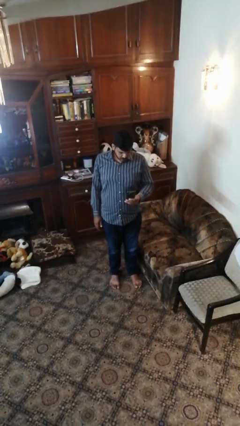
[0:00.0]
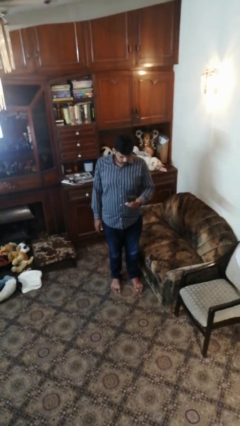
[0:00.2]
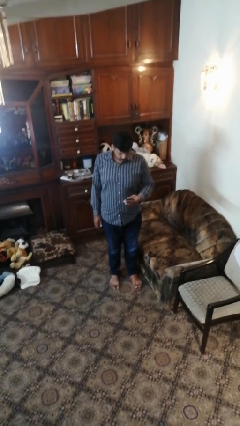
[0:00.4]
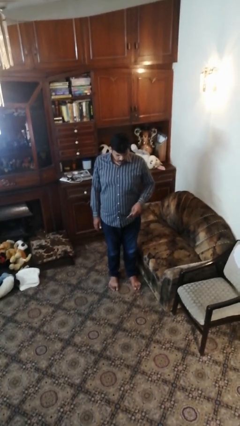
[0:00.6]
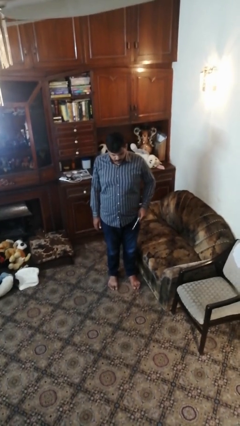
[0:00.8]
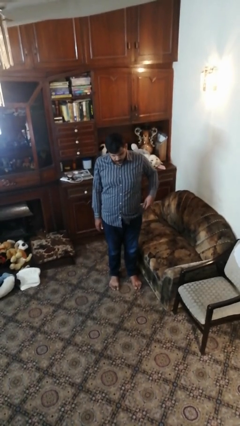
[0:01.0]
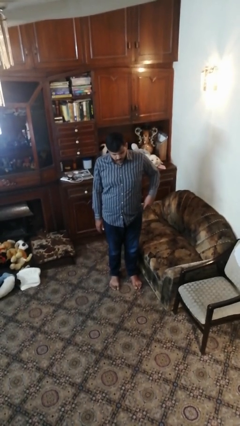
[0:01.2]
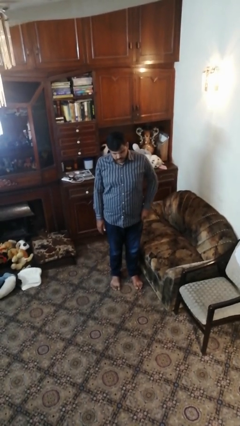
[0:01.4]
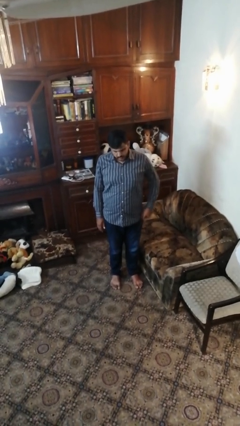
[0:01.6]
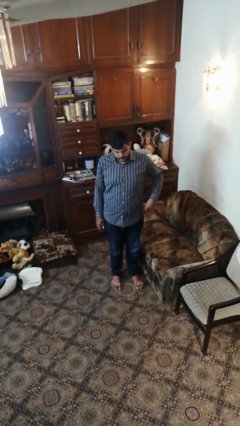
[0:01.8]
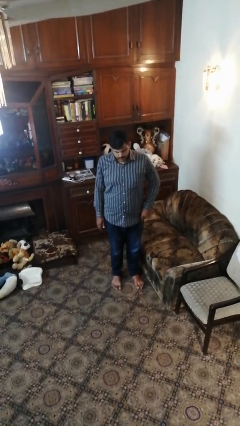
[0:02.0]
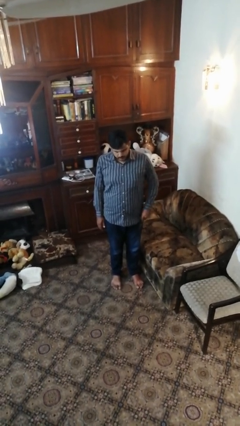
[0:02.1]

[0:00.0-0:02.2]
person puts phone into pocket

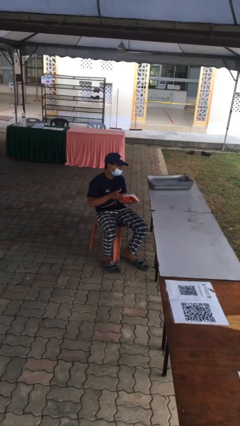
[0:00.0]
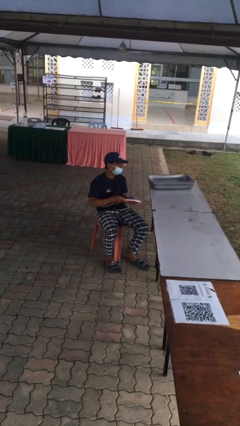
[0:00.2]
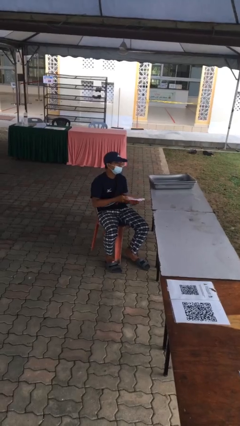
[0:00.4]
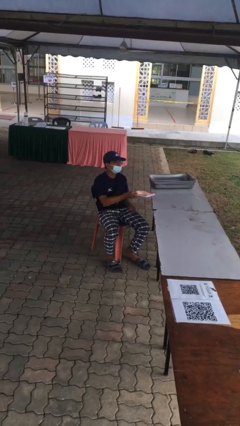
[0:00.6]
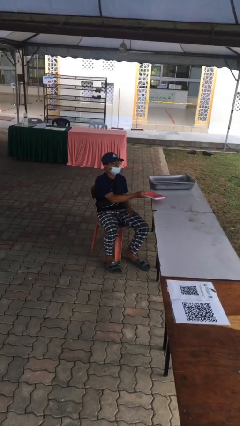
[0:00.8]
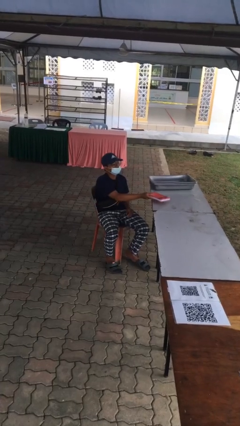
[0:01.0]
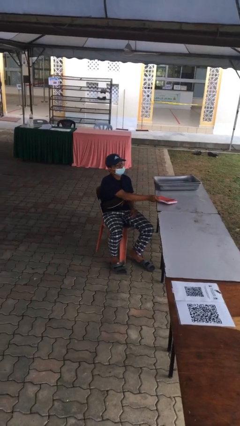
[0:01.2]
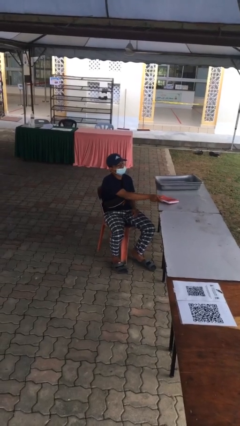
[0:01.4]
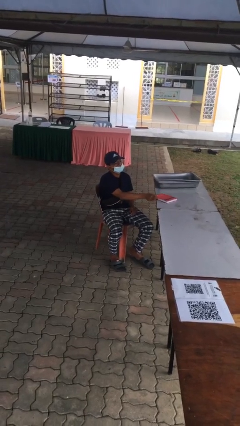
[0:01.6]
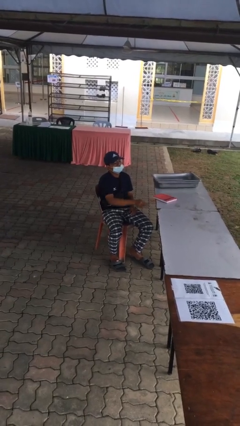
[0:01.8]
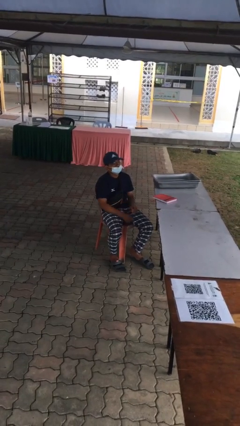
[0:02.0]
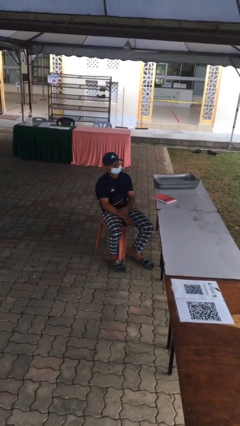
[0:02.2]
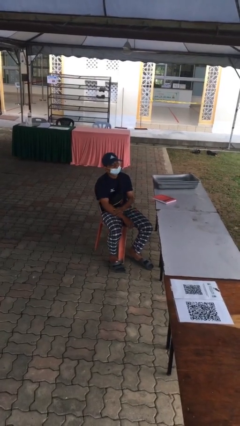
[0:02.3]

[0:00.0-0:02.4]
person puts down object on table

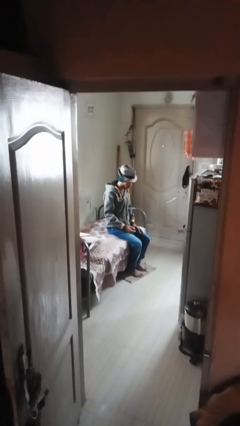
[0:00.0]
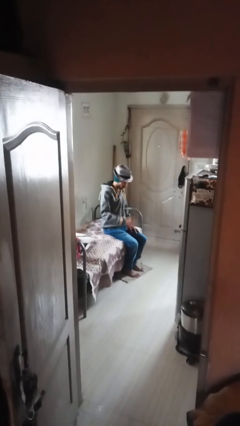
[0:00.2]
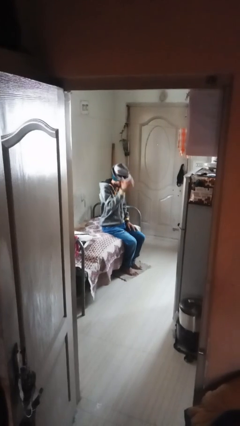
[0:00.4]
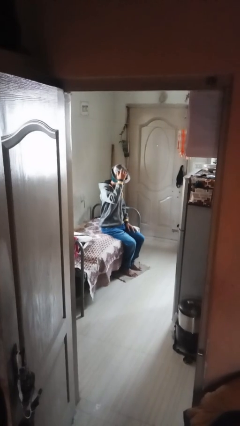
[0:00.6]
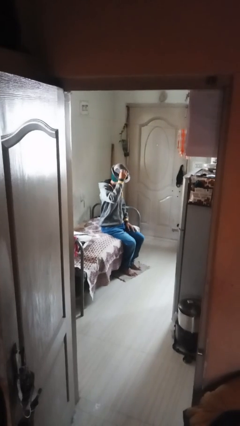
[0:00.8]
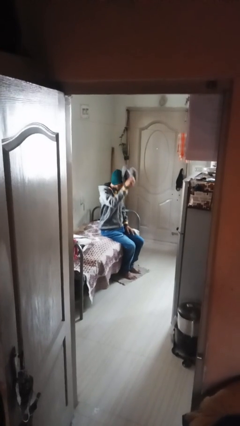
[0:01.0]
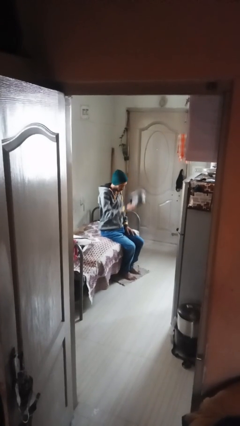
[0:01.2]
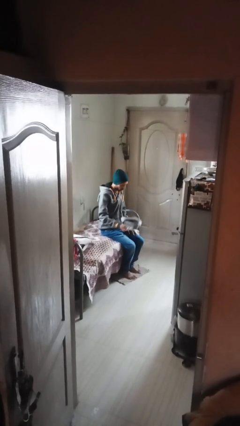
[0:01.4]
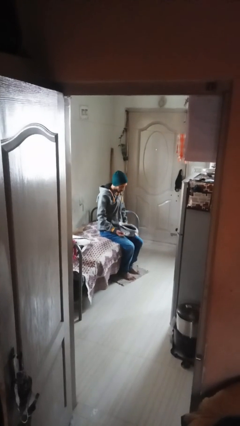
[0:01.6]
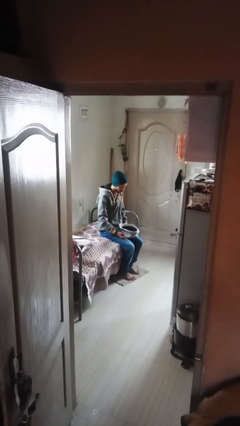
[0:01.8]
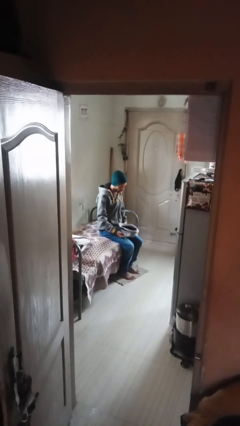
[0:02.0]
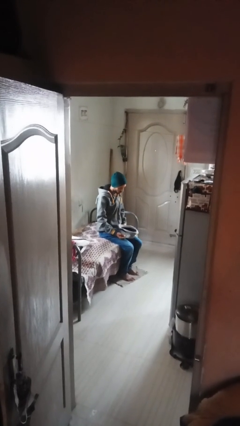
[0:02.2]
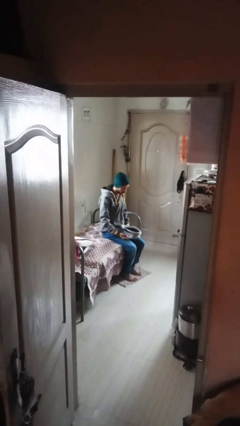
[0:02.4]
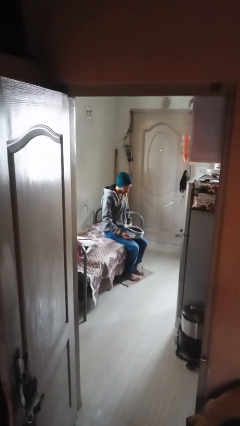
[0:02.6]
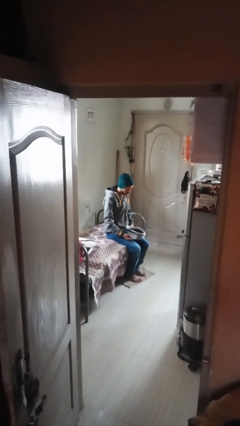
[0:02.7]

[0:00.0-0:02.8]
person takes off hat

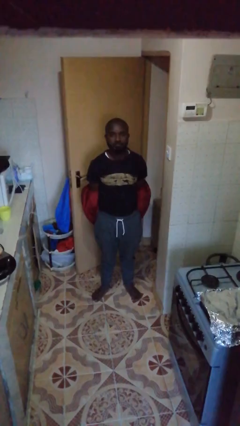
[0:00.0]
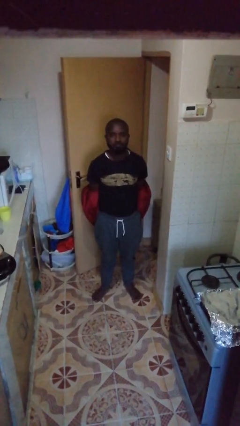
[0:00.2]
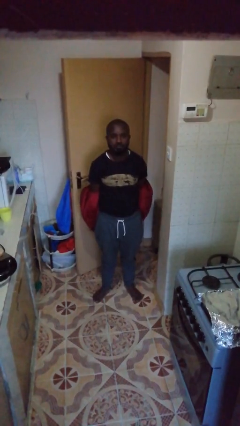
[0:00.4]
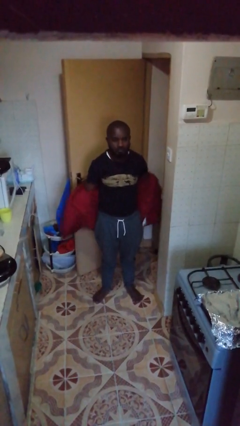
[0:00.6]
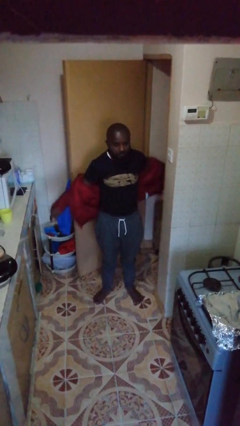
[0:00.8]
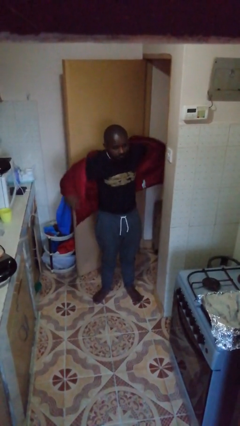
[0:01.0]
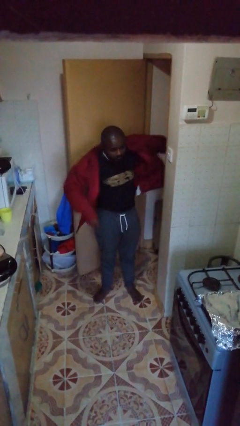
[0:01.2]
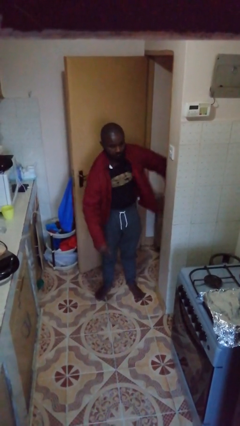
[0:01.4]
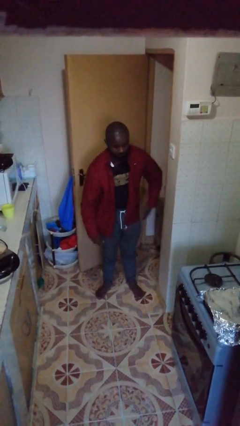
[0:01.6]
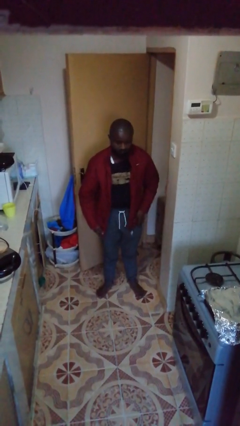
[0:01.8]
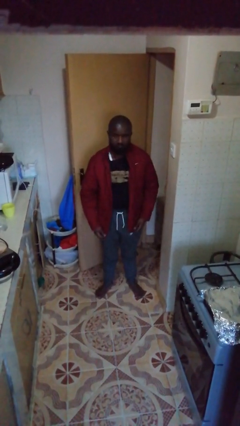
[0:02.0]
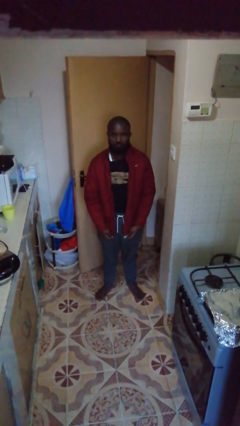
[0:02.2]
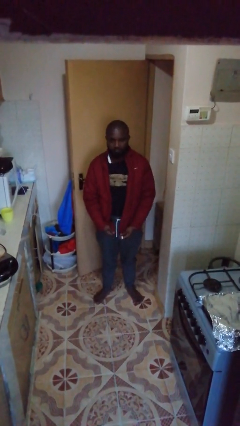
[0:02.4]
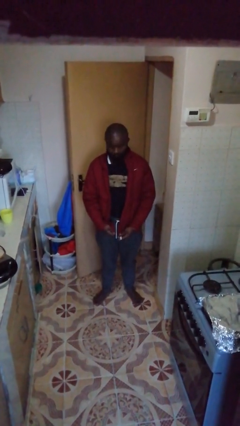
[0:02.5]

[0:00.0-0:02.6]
person puts on jacket

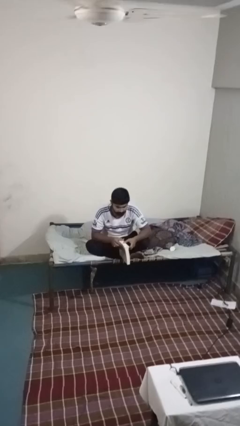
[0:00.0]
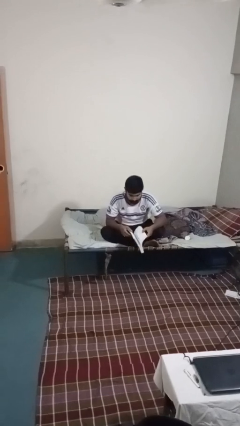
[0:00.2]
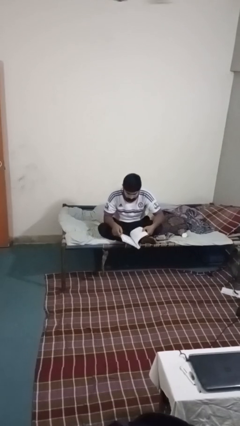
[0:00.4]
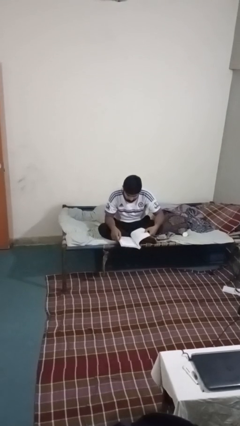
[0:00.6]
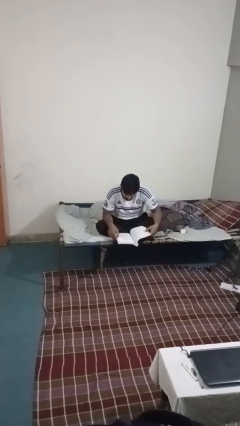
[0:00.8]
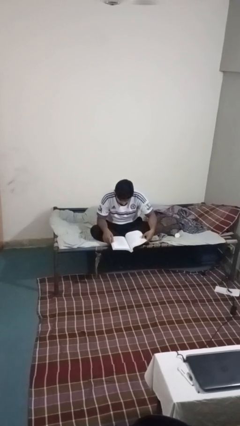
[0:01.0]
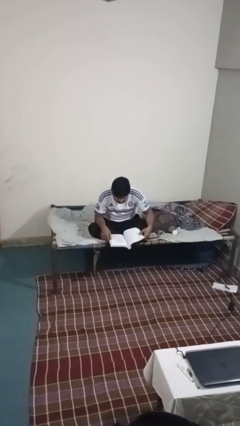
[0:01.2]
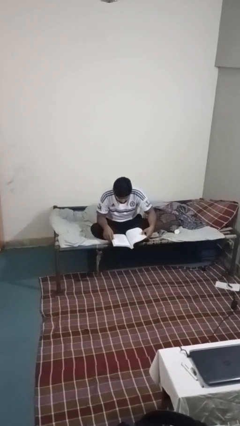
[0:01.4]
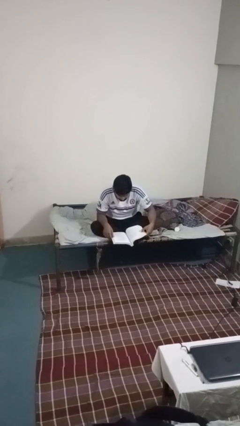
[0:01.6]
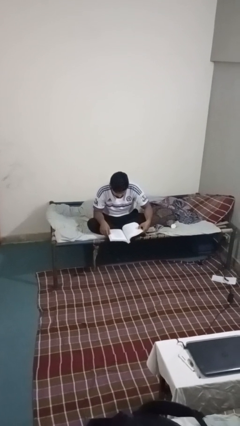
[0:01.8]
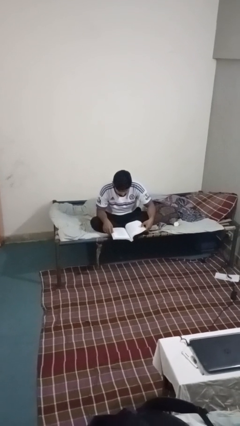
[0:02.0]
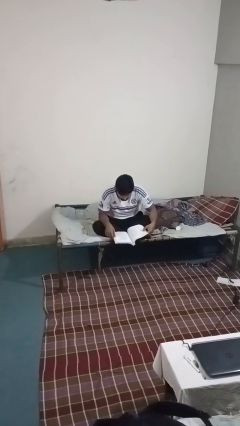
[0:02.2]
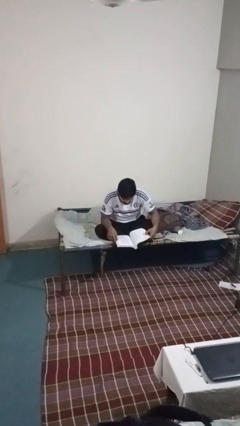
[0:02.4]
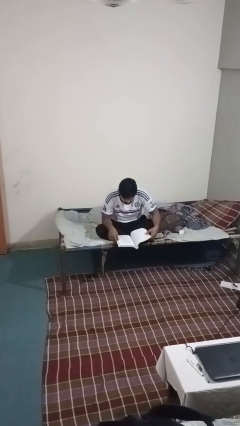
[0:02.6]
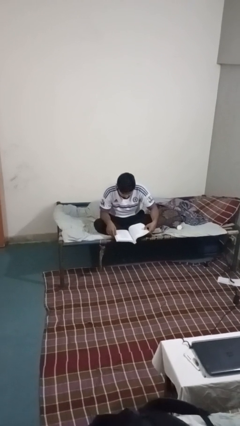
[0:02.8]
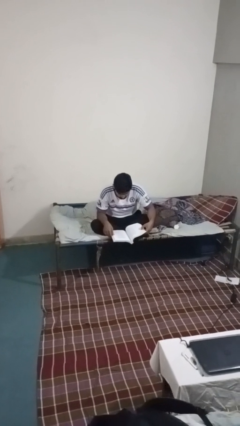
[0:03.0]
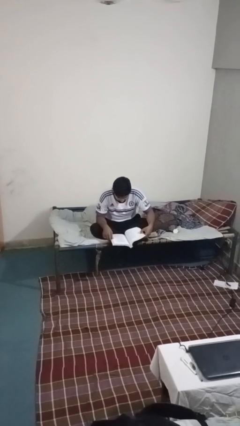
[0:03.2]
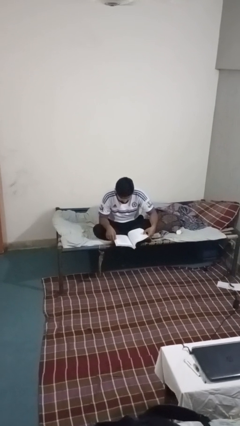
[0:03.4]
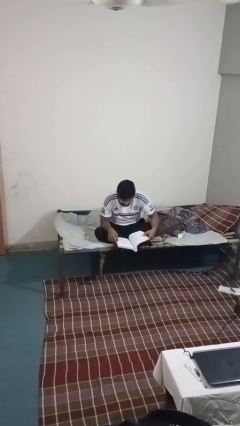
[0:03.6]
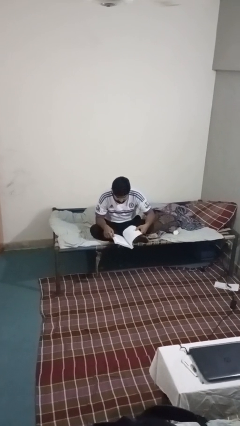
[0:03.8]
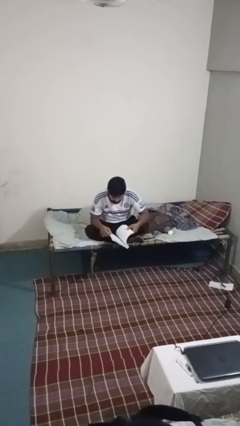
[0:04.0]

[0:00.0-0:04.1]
person reads book

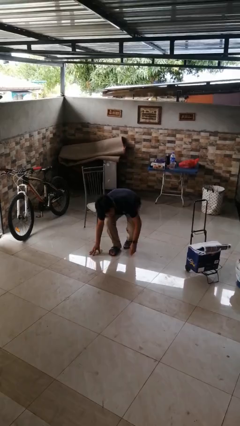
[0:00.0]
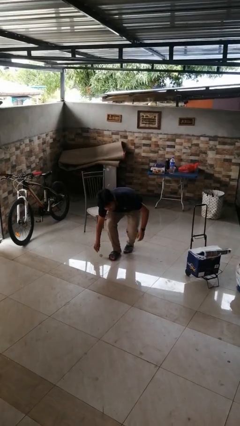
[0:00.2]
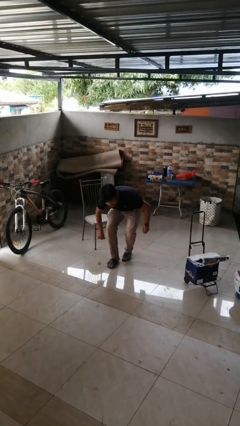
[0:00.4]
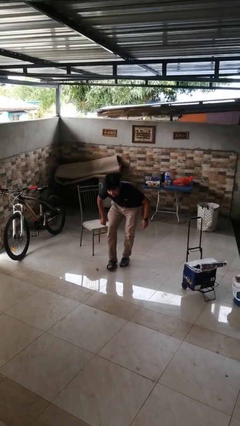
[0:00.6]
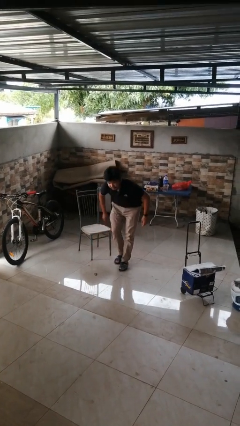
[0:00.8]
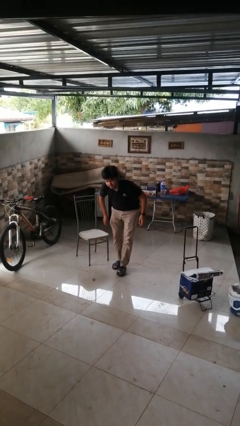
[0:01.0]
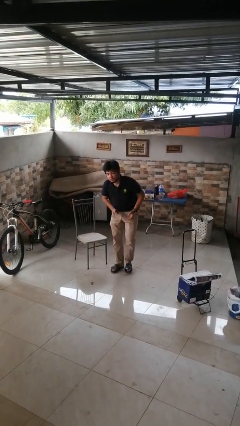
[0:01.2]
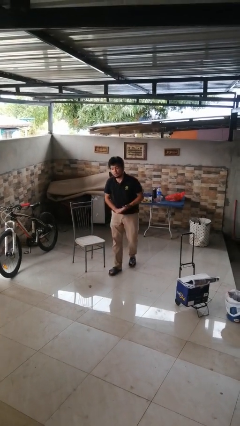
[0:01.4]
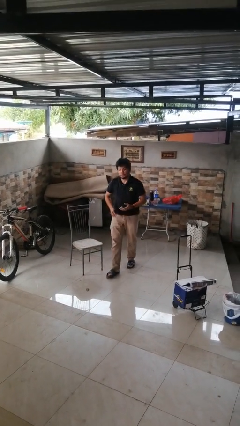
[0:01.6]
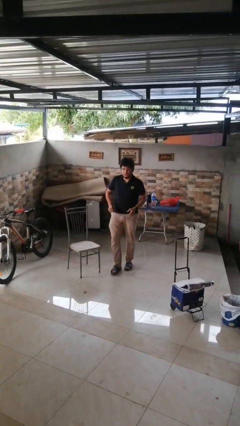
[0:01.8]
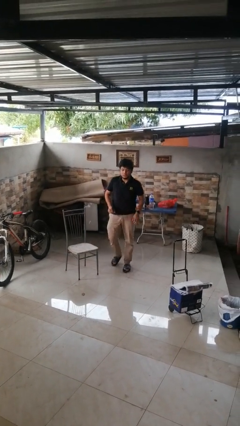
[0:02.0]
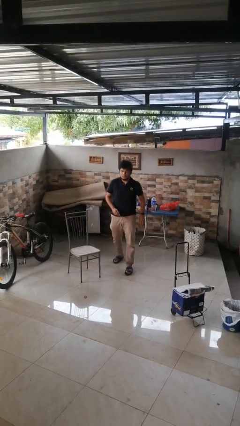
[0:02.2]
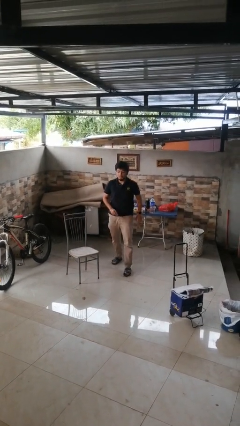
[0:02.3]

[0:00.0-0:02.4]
person stands up from floor

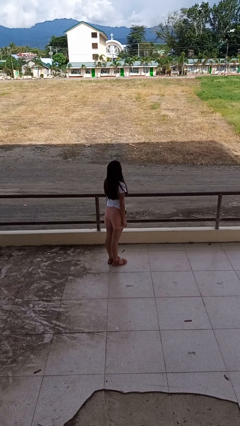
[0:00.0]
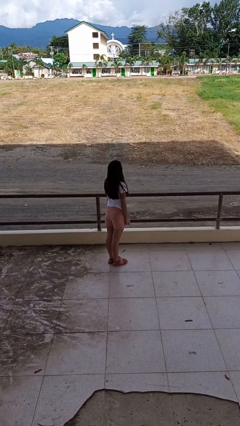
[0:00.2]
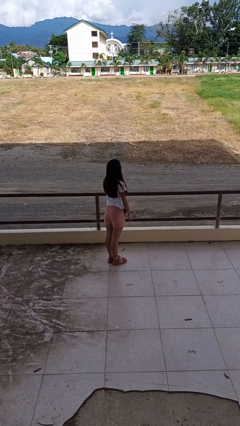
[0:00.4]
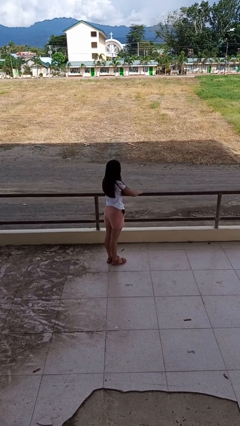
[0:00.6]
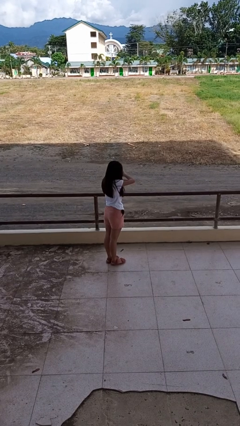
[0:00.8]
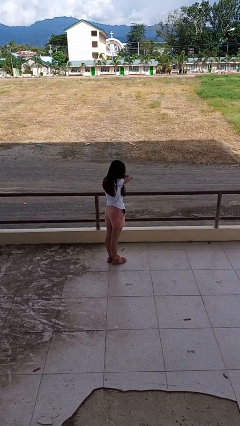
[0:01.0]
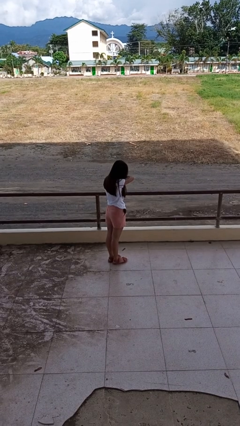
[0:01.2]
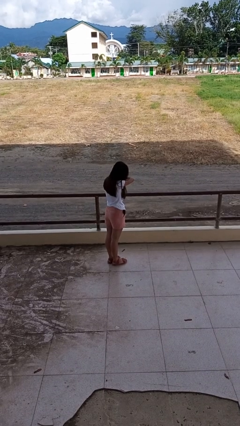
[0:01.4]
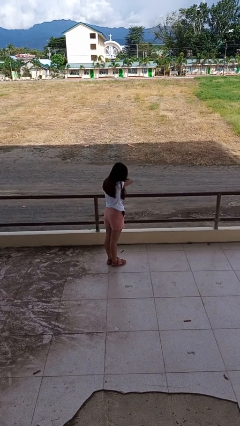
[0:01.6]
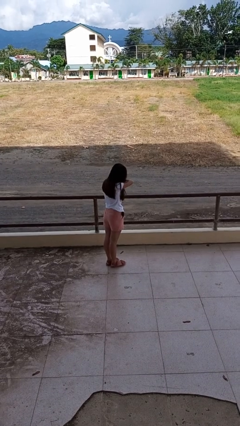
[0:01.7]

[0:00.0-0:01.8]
person sneezes into arm
